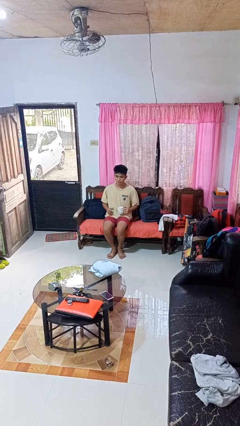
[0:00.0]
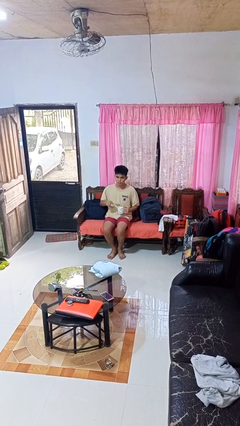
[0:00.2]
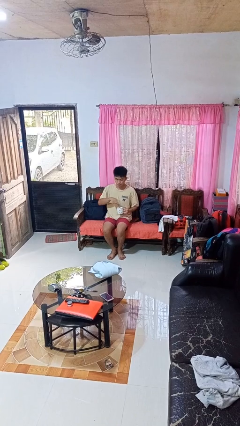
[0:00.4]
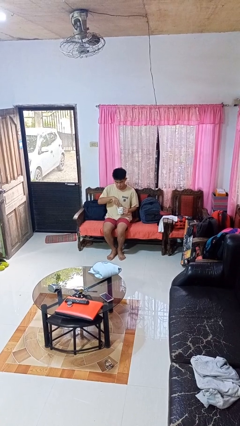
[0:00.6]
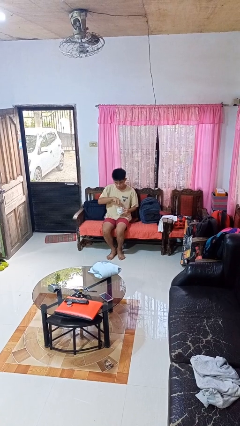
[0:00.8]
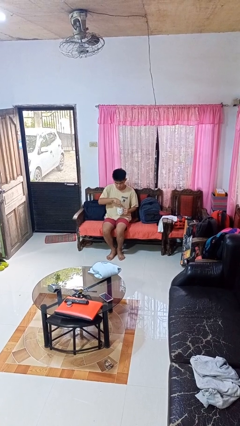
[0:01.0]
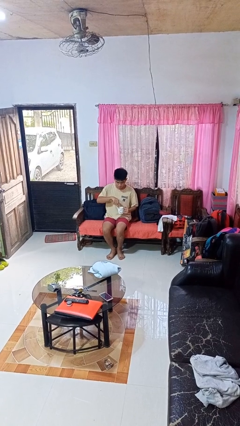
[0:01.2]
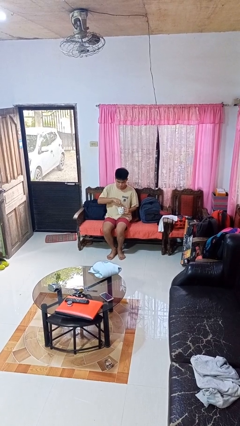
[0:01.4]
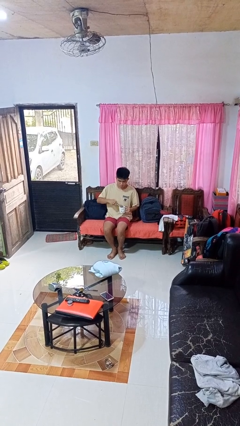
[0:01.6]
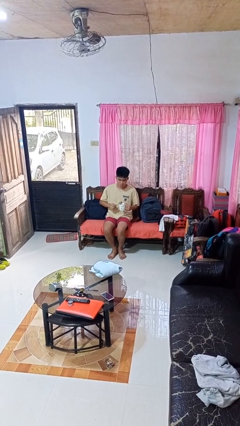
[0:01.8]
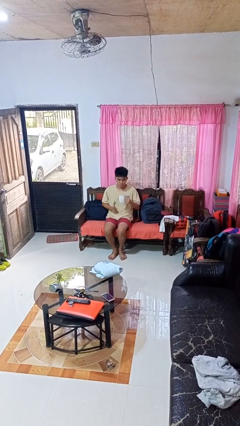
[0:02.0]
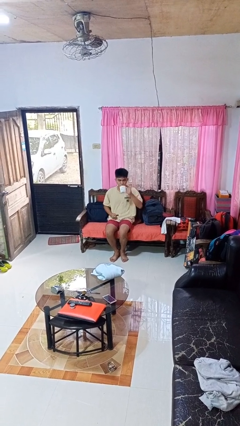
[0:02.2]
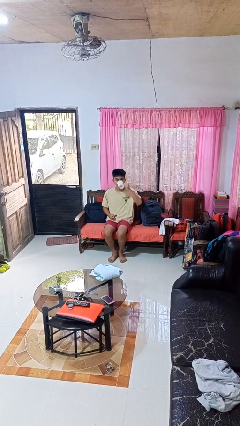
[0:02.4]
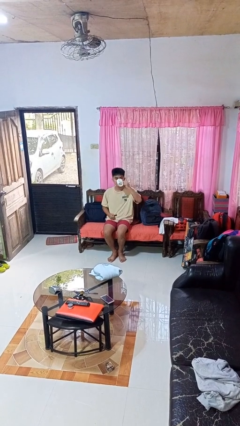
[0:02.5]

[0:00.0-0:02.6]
person stirs mug

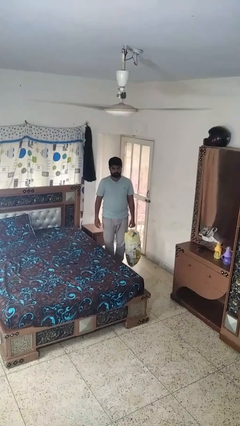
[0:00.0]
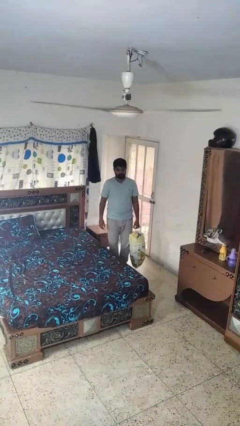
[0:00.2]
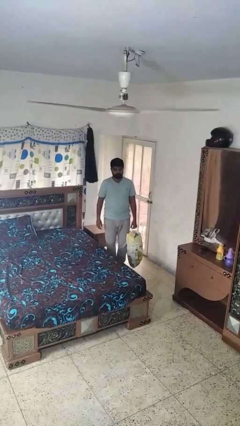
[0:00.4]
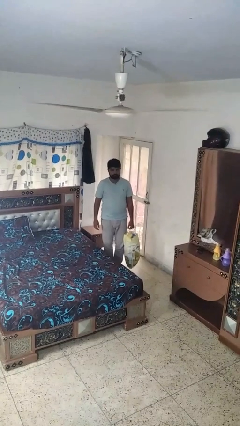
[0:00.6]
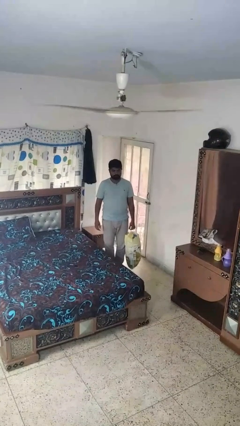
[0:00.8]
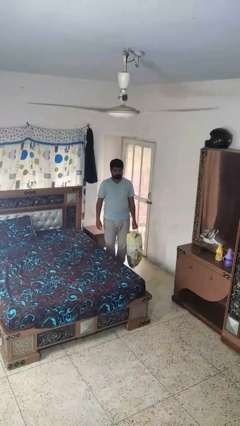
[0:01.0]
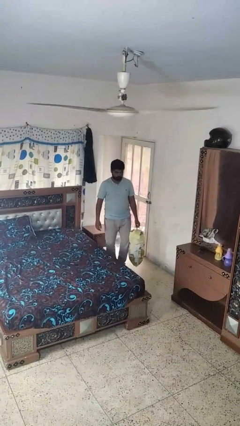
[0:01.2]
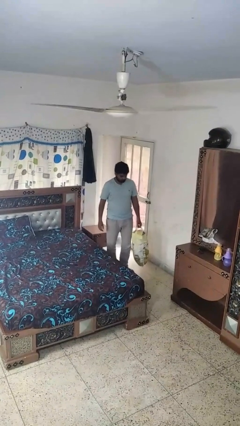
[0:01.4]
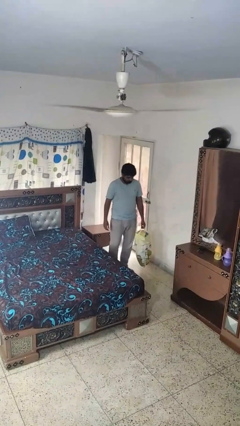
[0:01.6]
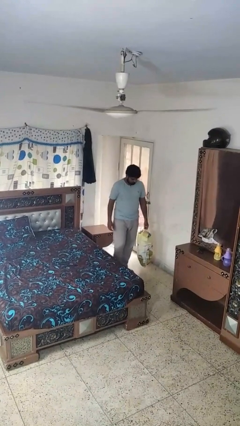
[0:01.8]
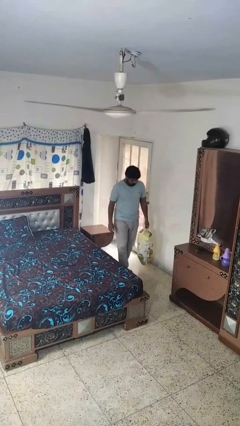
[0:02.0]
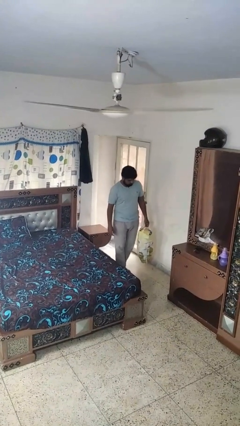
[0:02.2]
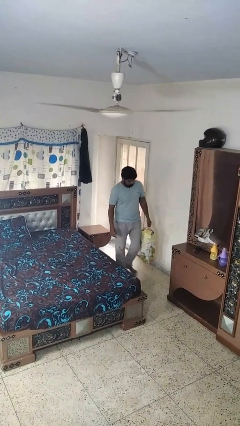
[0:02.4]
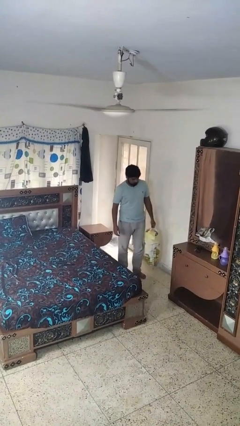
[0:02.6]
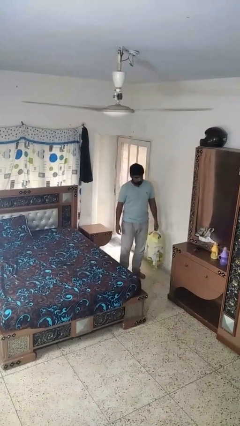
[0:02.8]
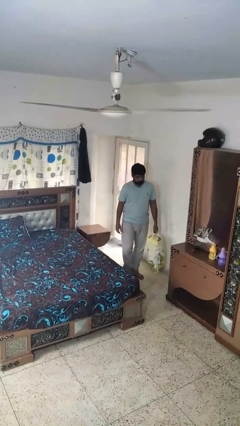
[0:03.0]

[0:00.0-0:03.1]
person carries groceries

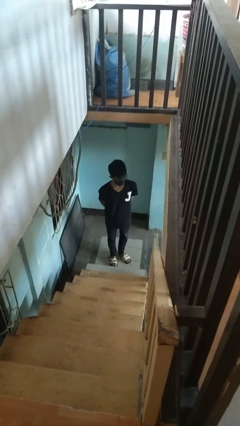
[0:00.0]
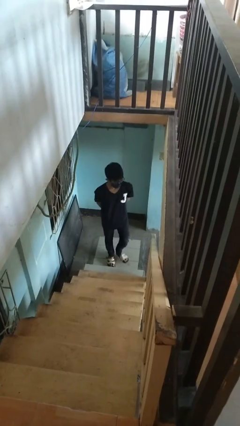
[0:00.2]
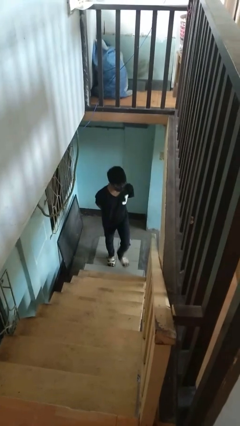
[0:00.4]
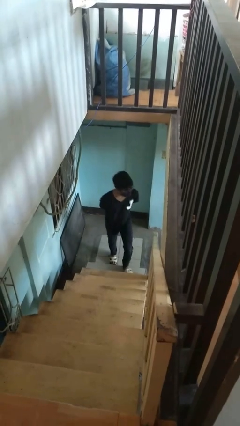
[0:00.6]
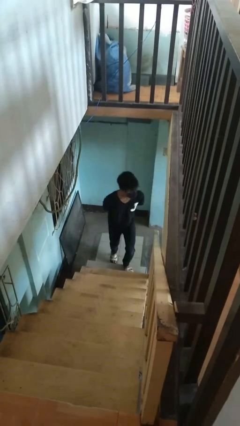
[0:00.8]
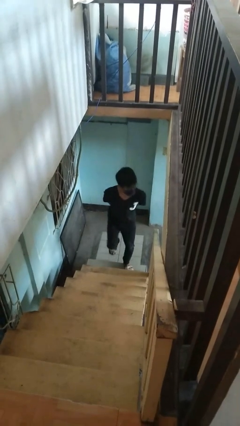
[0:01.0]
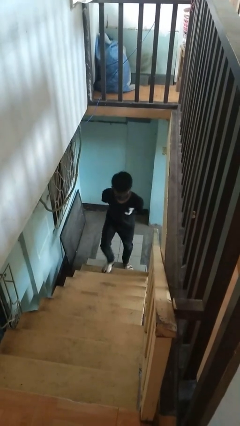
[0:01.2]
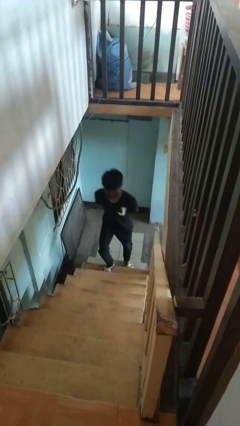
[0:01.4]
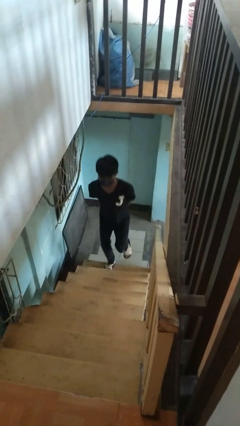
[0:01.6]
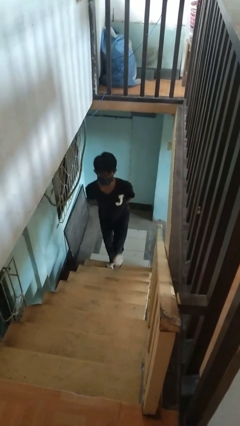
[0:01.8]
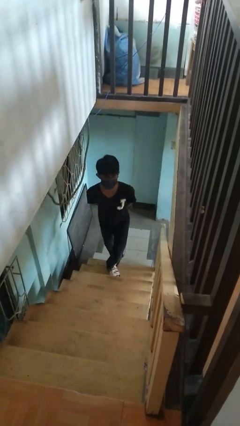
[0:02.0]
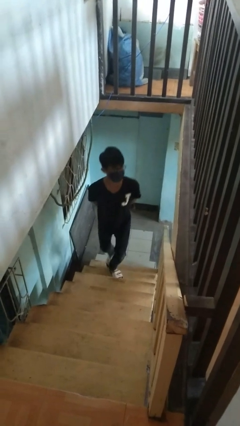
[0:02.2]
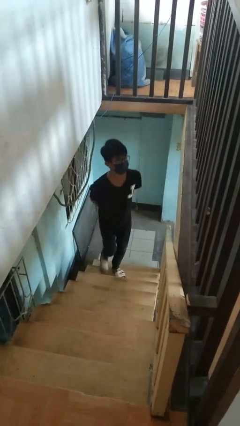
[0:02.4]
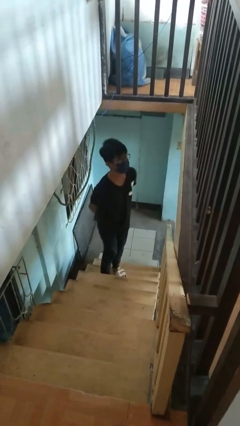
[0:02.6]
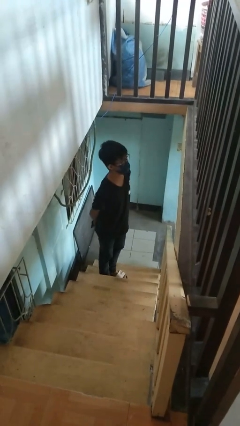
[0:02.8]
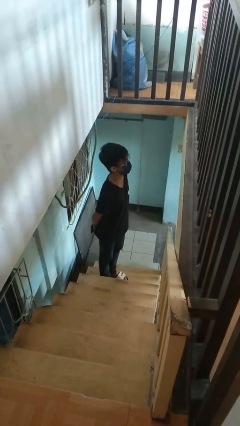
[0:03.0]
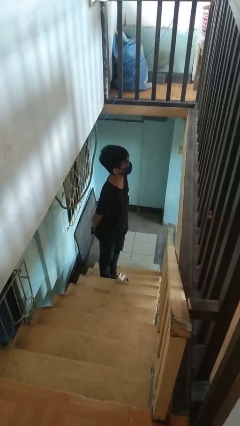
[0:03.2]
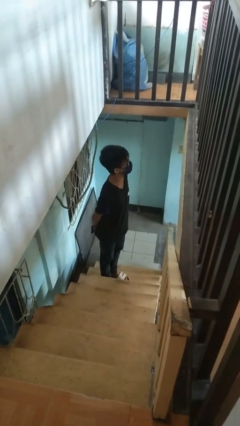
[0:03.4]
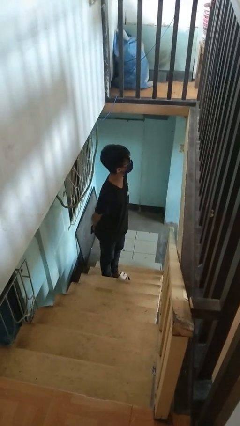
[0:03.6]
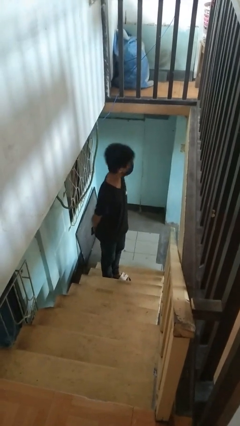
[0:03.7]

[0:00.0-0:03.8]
person climbs up ladder

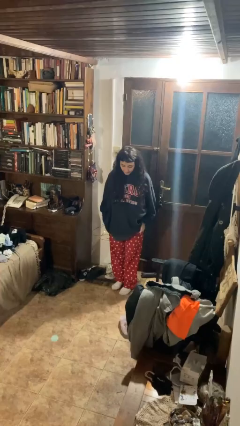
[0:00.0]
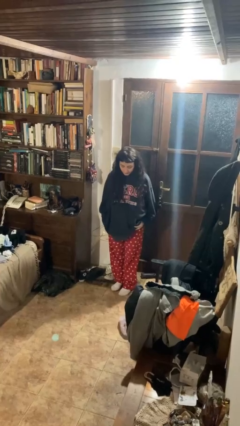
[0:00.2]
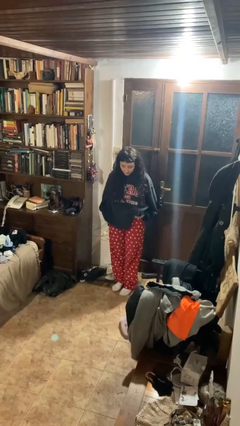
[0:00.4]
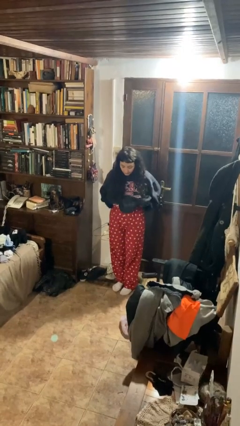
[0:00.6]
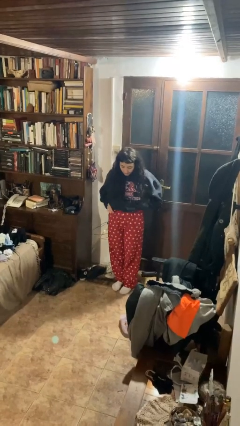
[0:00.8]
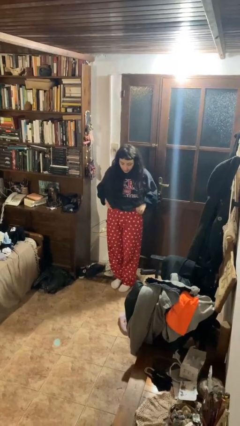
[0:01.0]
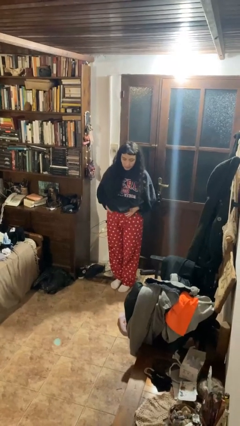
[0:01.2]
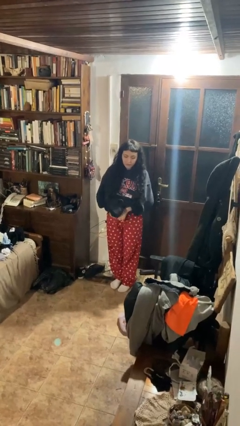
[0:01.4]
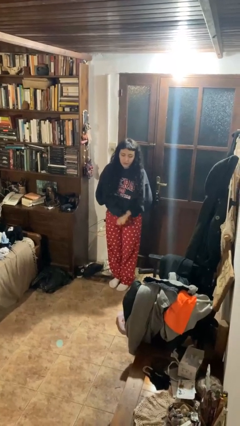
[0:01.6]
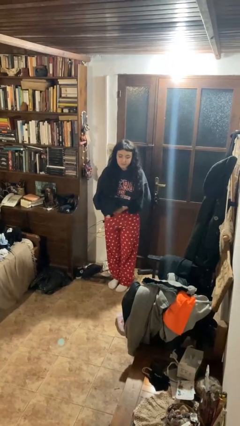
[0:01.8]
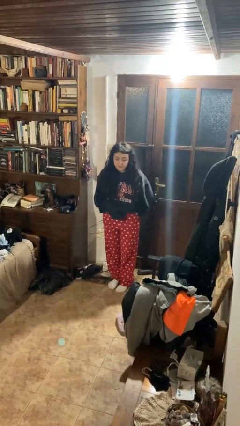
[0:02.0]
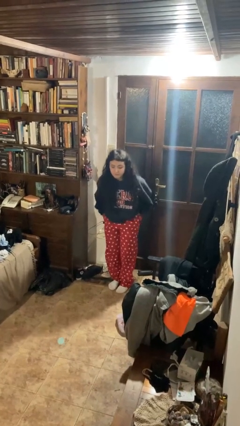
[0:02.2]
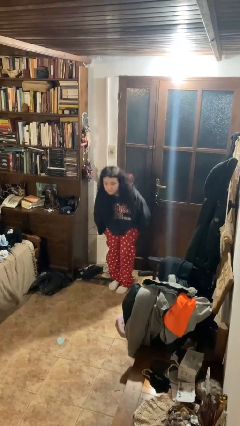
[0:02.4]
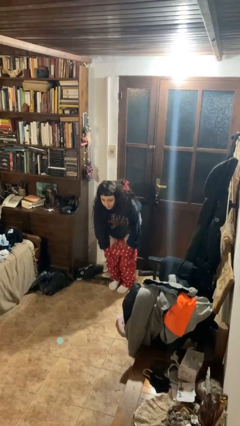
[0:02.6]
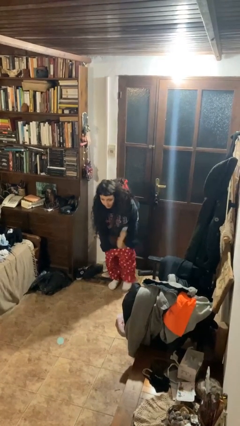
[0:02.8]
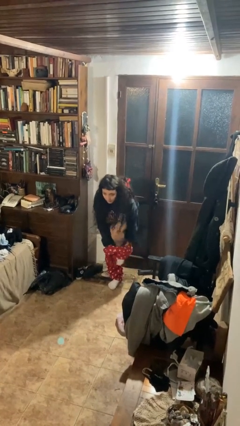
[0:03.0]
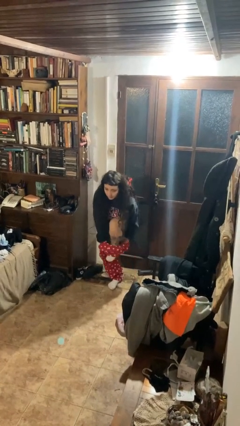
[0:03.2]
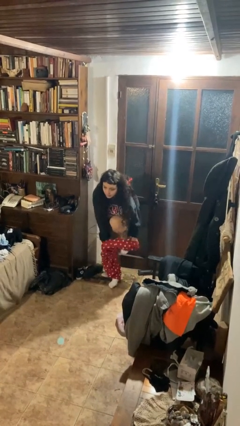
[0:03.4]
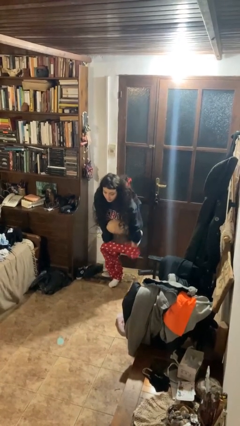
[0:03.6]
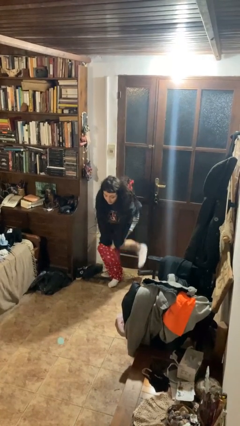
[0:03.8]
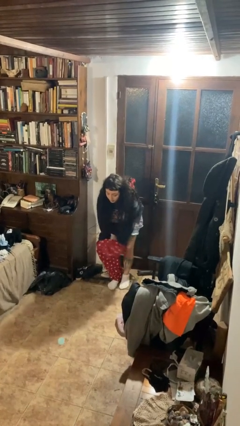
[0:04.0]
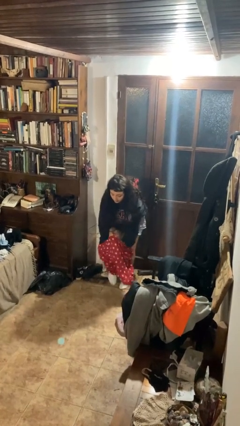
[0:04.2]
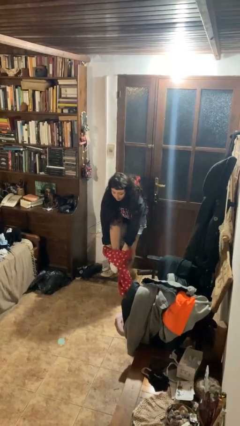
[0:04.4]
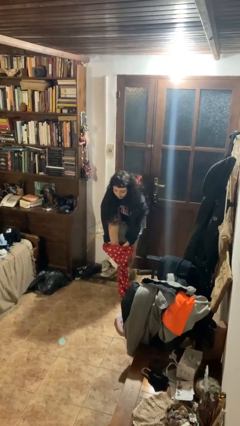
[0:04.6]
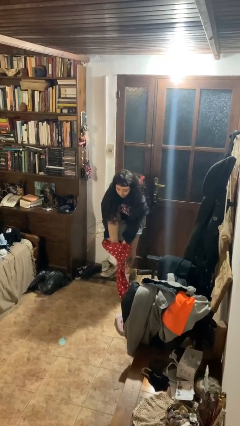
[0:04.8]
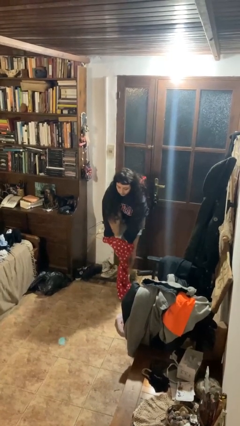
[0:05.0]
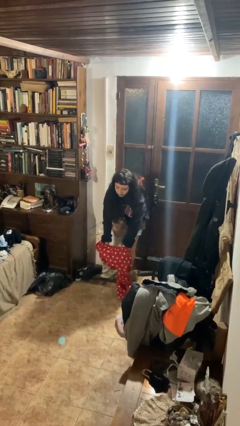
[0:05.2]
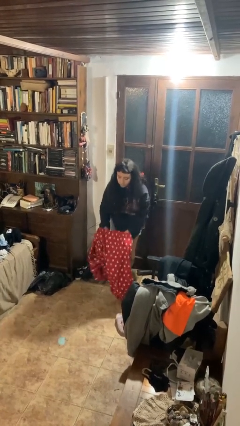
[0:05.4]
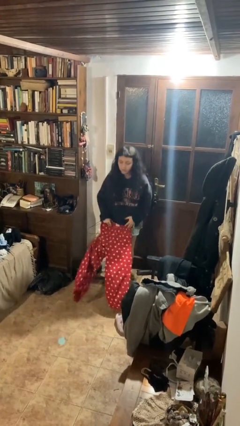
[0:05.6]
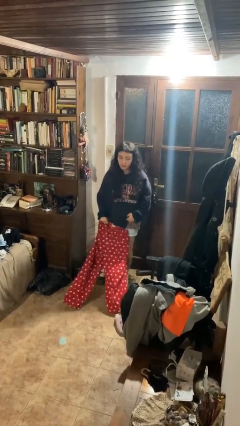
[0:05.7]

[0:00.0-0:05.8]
person takes off pants

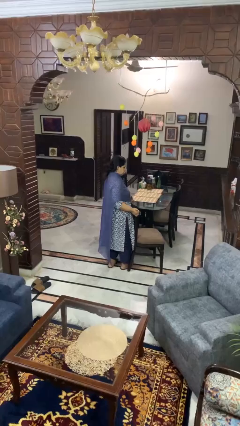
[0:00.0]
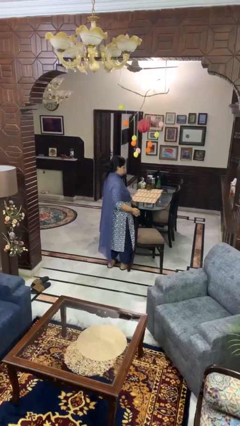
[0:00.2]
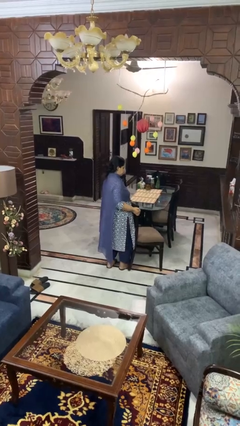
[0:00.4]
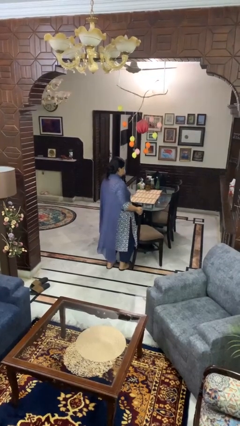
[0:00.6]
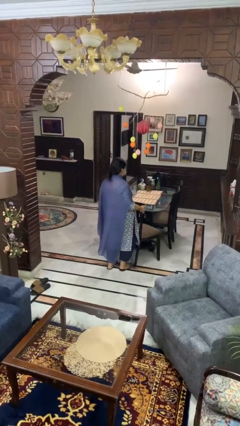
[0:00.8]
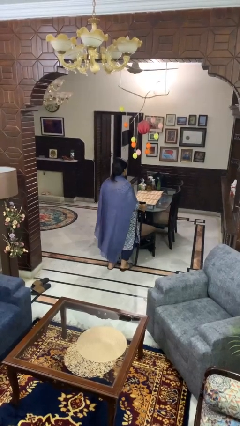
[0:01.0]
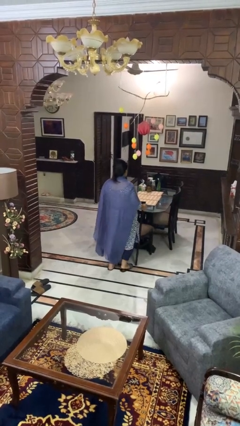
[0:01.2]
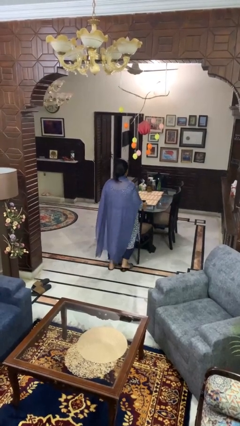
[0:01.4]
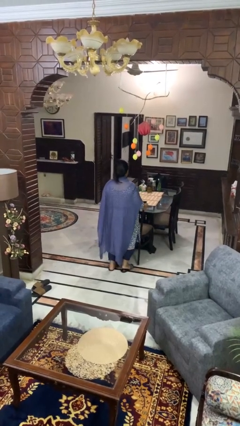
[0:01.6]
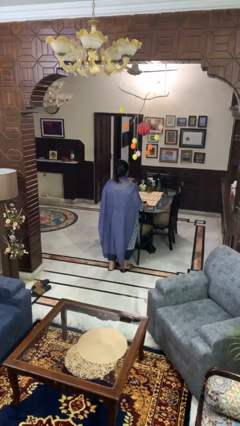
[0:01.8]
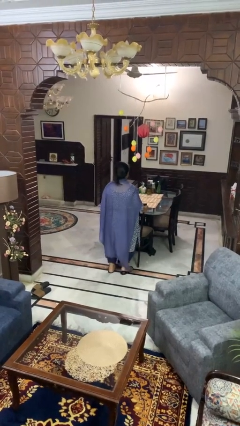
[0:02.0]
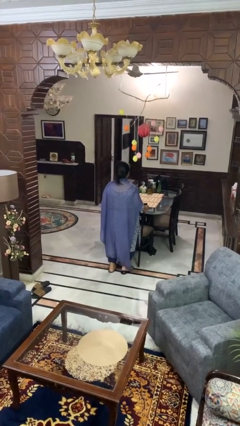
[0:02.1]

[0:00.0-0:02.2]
person pushes in chair
